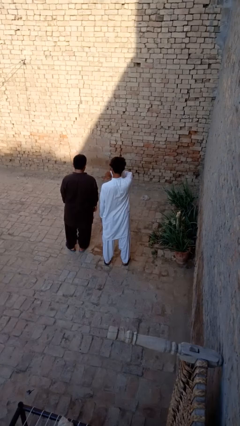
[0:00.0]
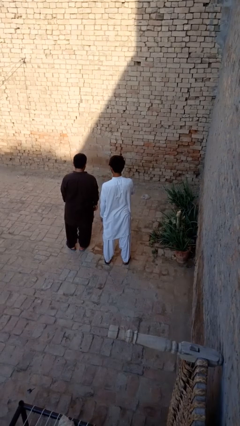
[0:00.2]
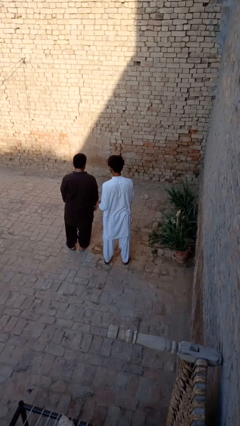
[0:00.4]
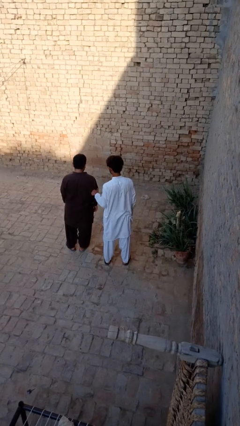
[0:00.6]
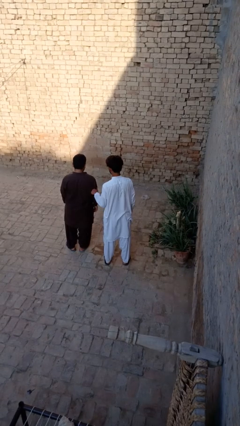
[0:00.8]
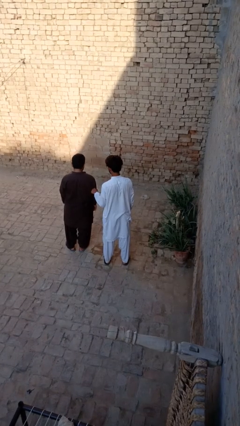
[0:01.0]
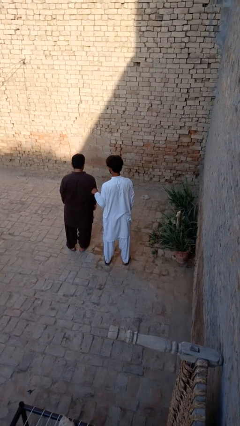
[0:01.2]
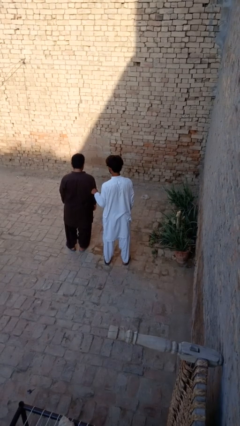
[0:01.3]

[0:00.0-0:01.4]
person tickles person

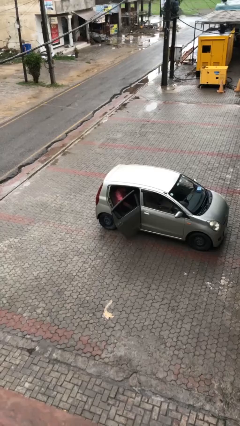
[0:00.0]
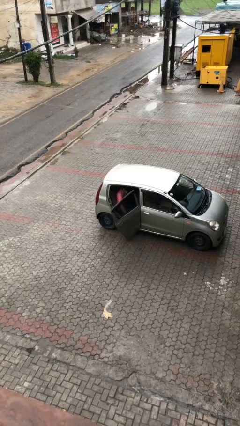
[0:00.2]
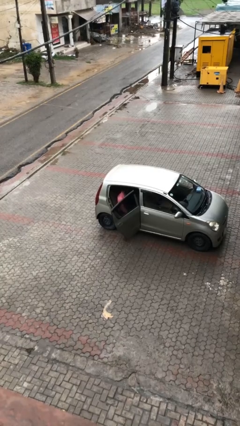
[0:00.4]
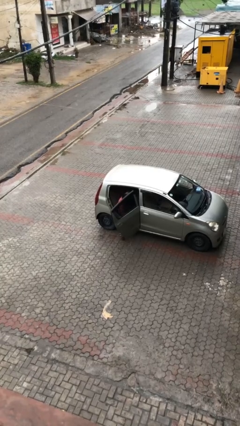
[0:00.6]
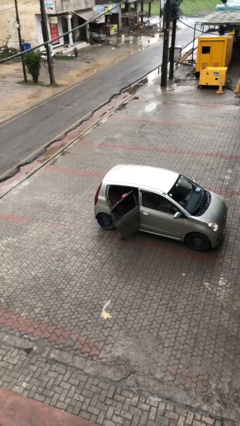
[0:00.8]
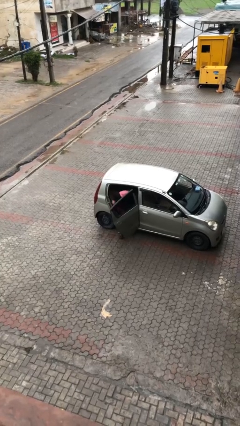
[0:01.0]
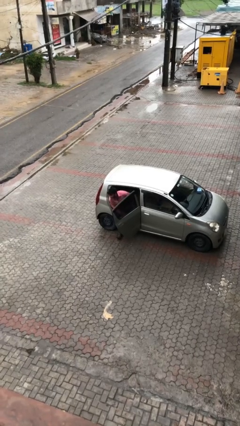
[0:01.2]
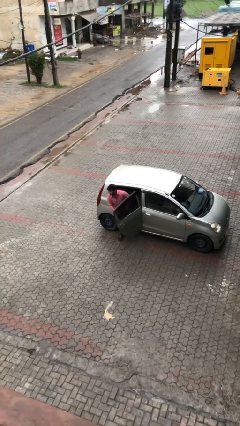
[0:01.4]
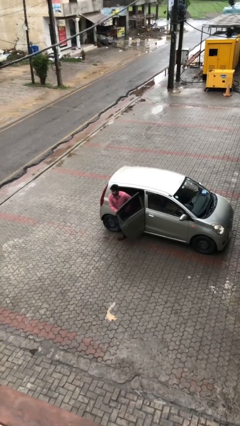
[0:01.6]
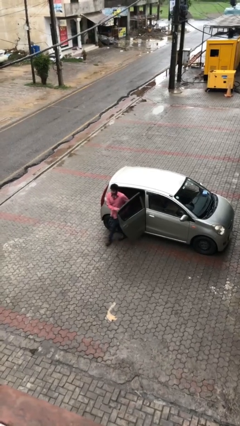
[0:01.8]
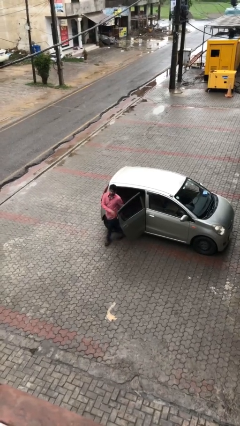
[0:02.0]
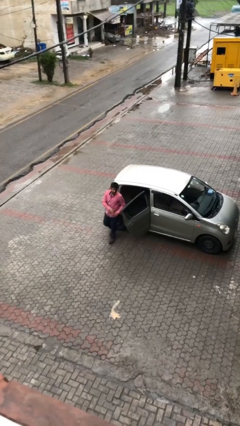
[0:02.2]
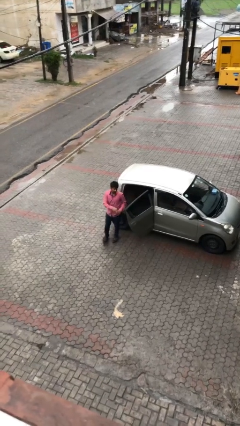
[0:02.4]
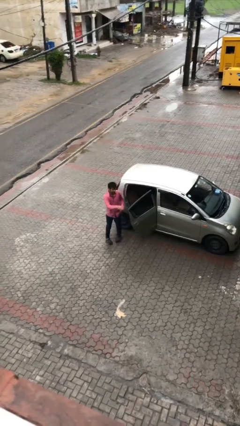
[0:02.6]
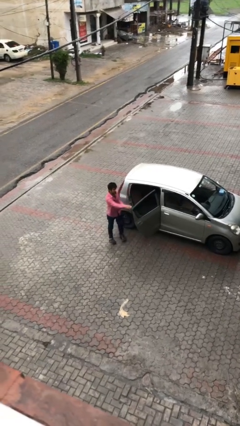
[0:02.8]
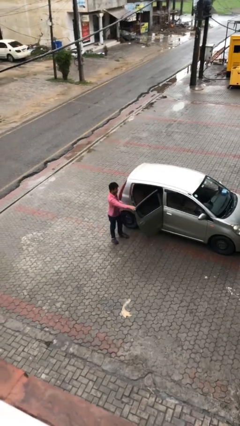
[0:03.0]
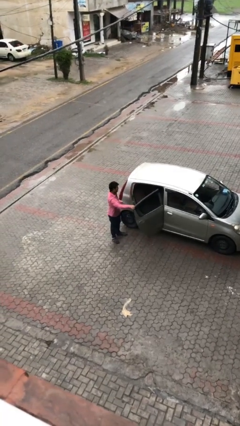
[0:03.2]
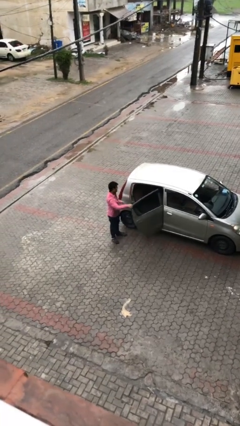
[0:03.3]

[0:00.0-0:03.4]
person exits car

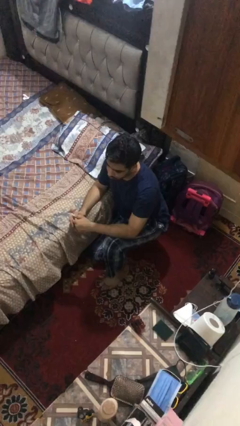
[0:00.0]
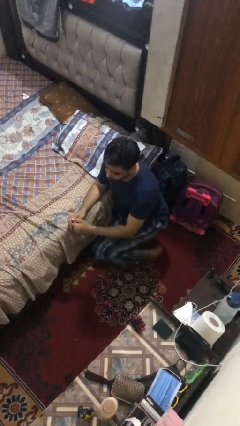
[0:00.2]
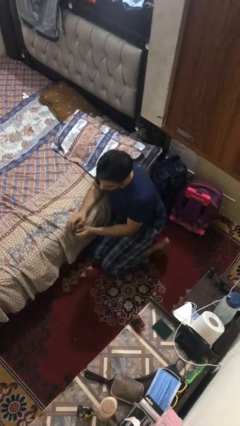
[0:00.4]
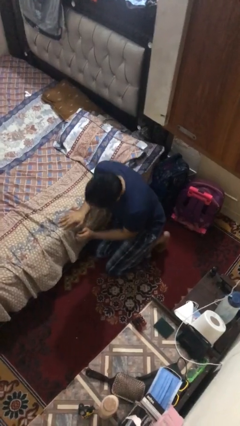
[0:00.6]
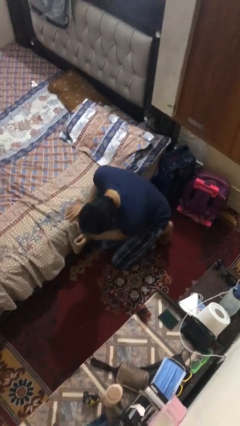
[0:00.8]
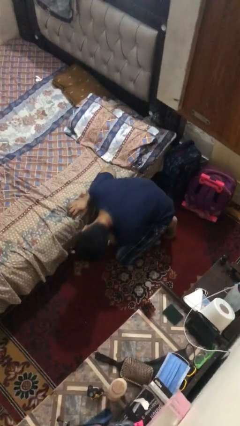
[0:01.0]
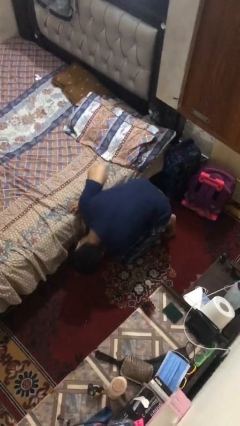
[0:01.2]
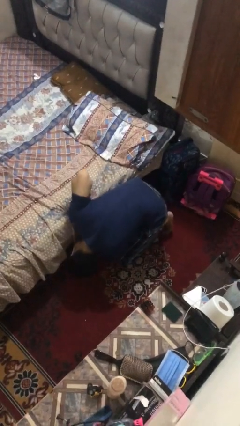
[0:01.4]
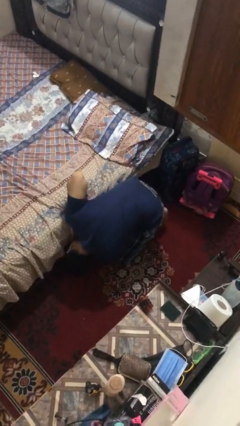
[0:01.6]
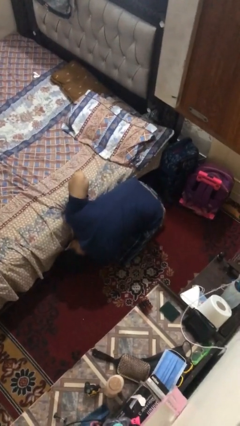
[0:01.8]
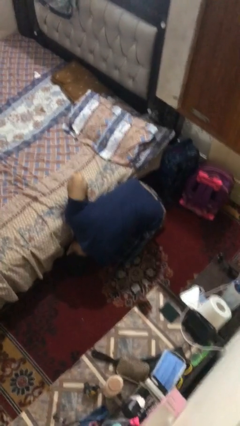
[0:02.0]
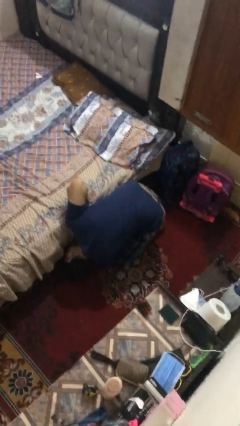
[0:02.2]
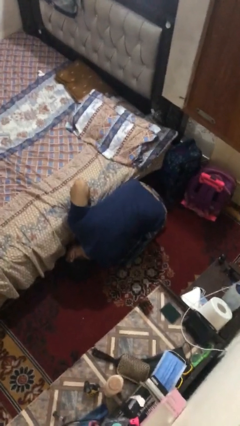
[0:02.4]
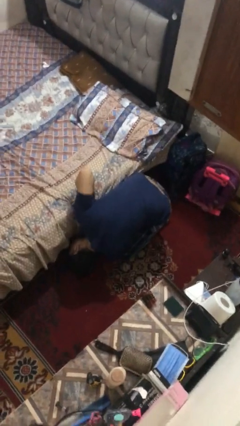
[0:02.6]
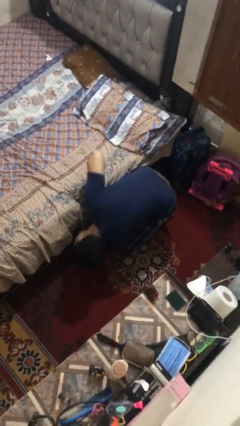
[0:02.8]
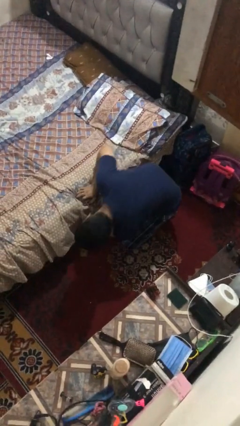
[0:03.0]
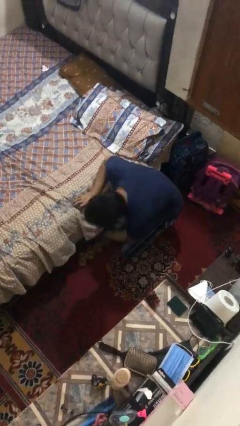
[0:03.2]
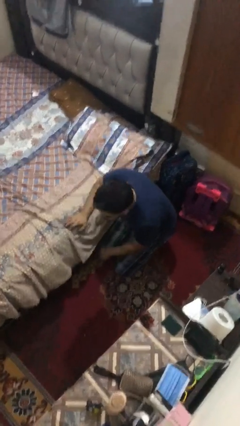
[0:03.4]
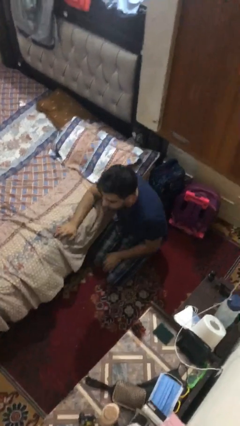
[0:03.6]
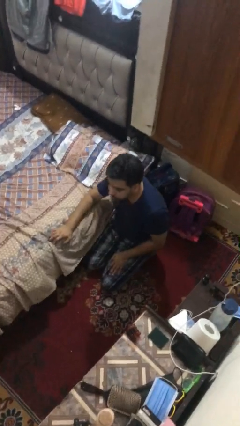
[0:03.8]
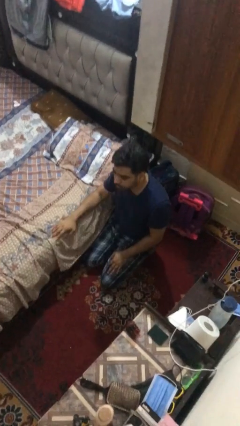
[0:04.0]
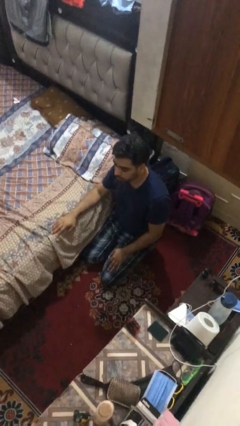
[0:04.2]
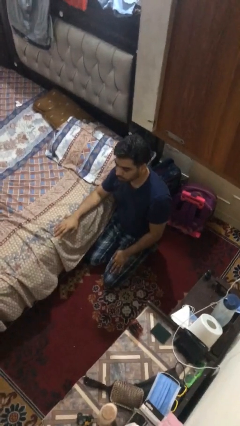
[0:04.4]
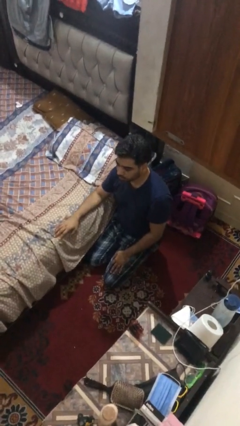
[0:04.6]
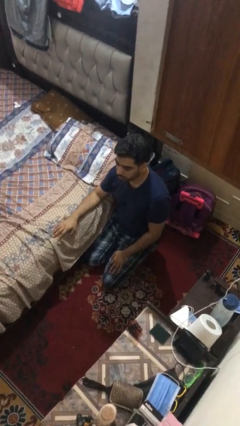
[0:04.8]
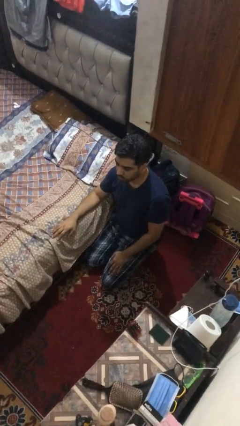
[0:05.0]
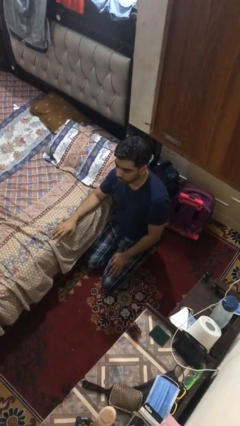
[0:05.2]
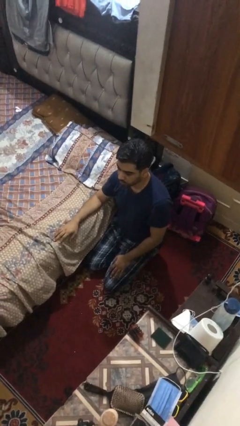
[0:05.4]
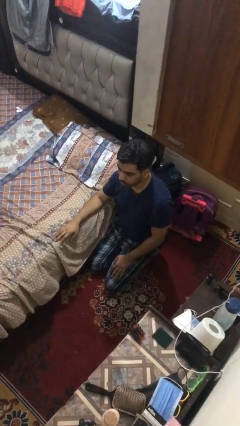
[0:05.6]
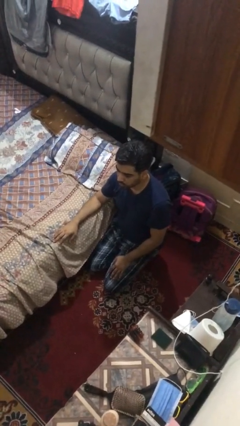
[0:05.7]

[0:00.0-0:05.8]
person searches under bed

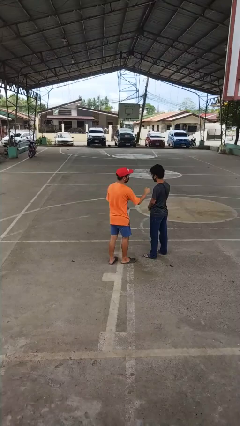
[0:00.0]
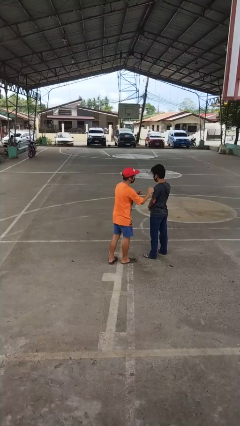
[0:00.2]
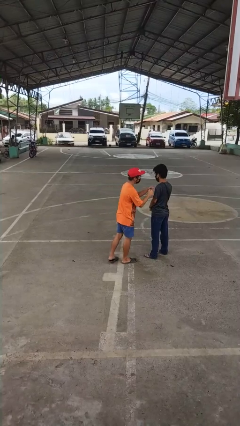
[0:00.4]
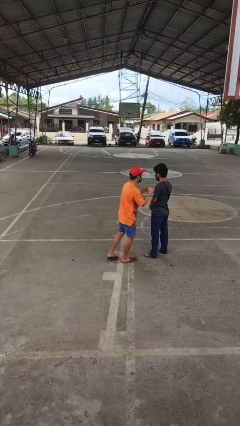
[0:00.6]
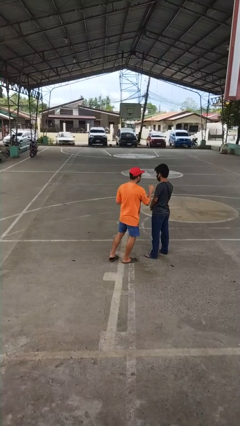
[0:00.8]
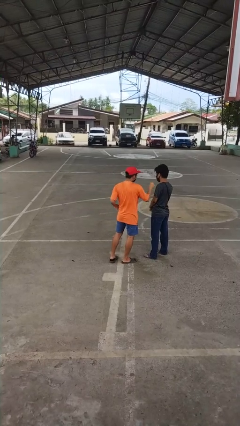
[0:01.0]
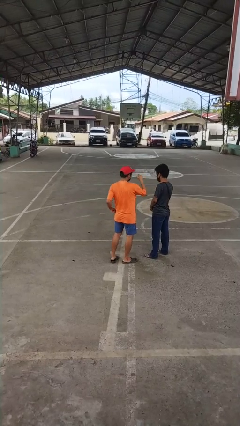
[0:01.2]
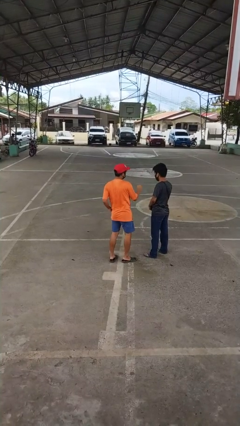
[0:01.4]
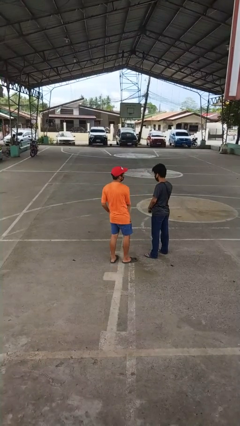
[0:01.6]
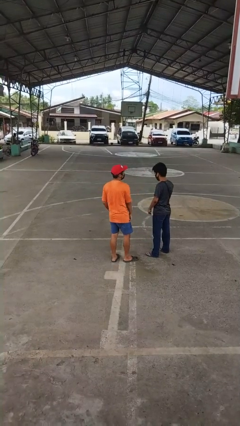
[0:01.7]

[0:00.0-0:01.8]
person pounds shoulders of person

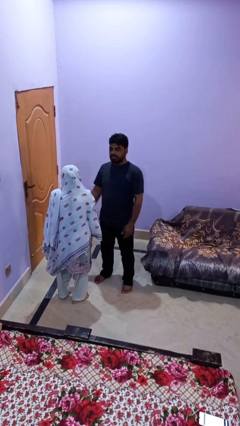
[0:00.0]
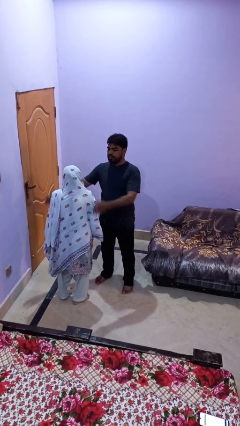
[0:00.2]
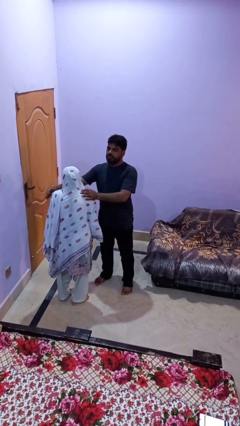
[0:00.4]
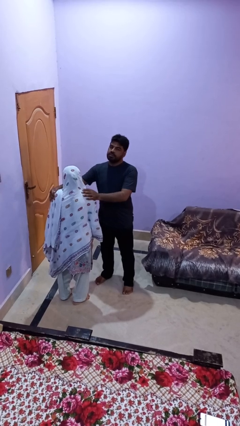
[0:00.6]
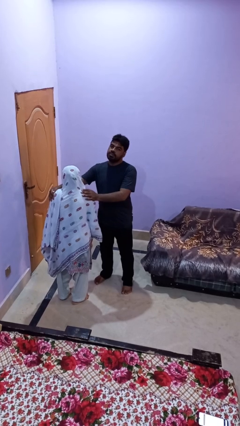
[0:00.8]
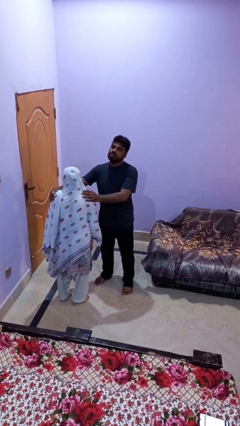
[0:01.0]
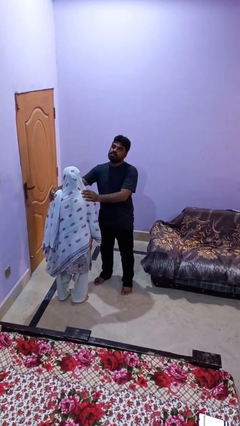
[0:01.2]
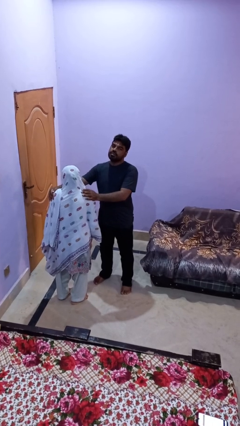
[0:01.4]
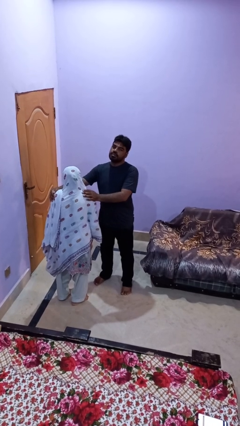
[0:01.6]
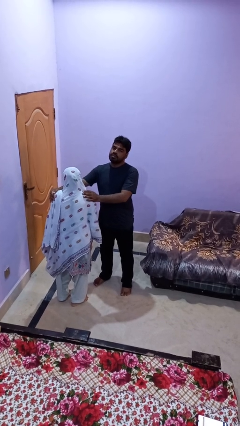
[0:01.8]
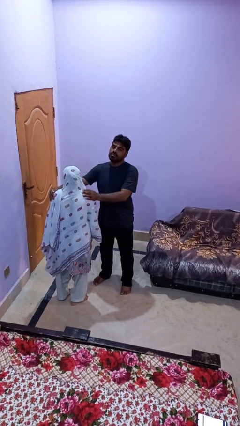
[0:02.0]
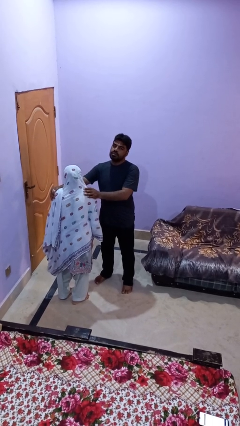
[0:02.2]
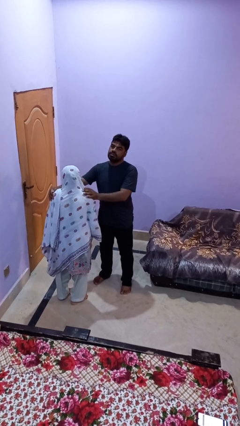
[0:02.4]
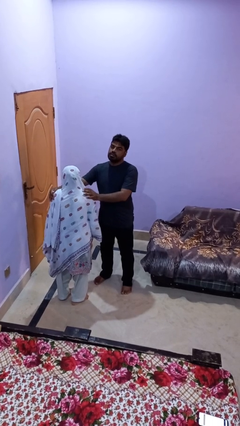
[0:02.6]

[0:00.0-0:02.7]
person grabs person by shoulder

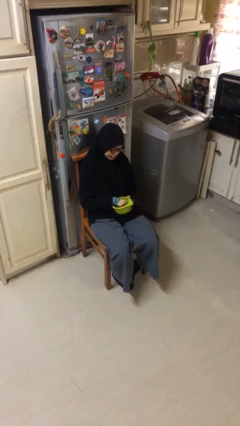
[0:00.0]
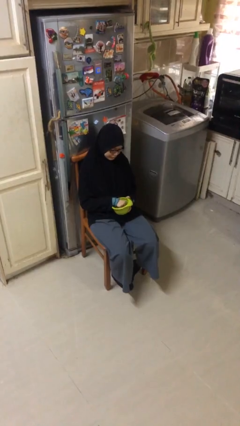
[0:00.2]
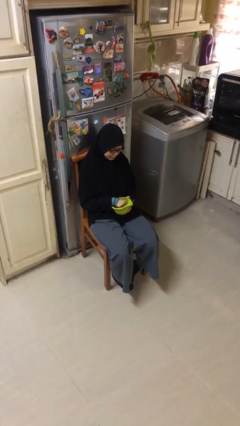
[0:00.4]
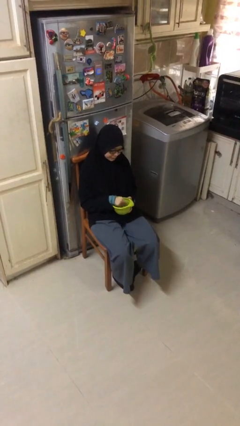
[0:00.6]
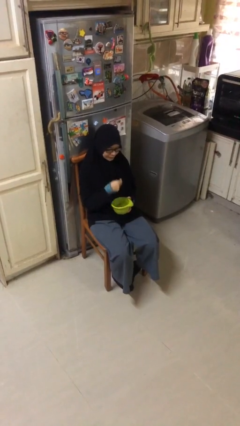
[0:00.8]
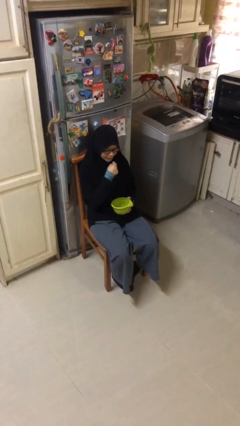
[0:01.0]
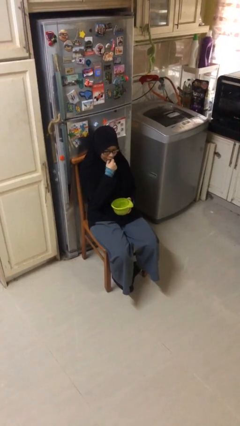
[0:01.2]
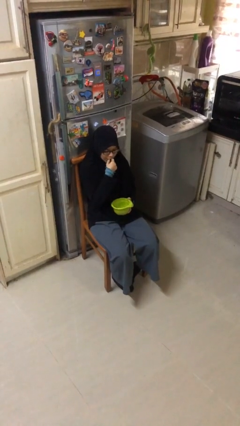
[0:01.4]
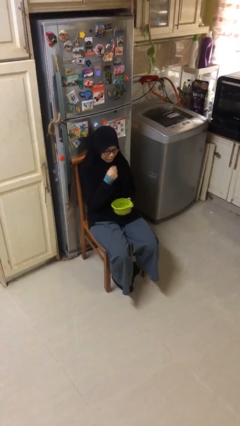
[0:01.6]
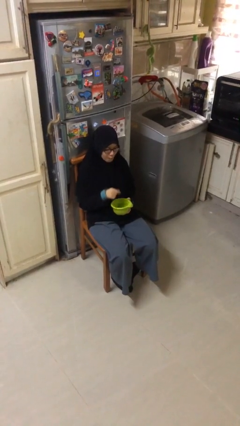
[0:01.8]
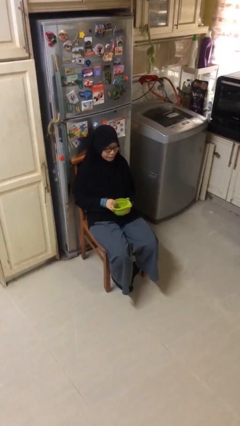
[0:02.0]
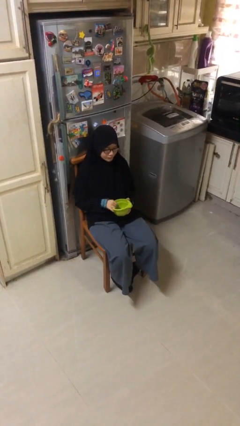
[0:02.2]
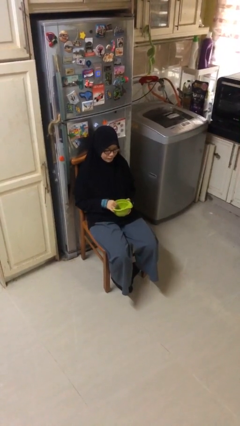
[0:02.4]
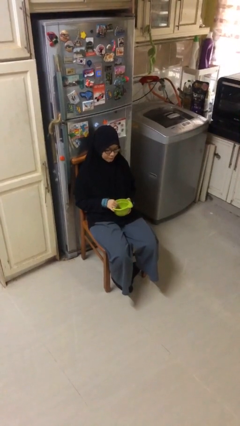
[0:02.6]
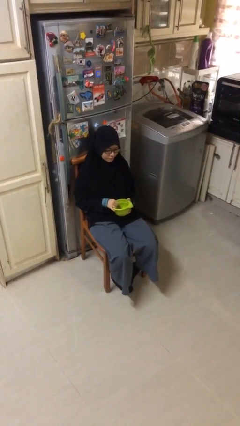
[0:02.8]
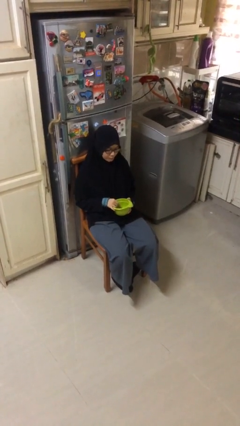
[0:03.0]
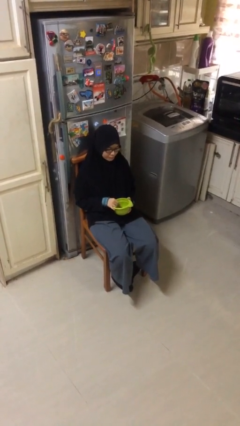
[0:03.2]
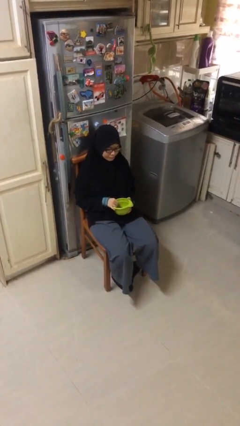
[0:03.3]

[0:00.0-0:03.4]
person eats with hands
